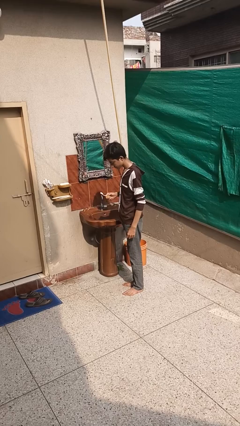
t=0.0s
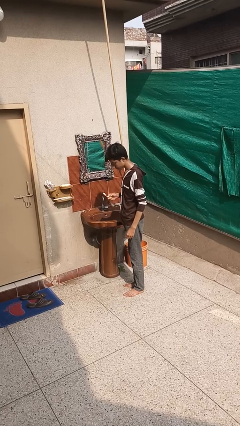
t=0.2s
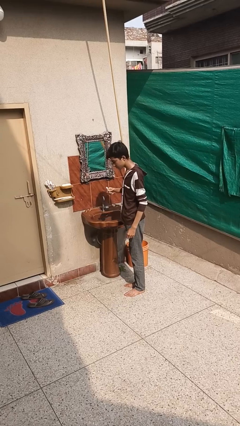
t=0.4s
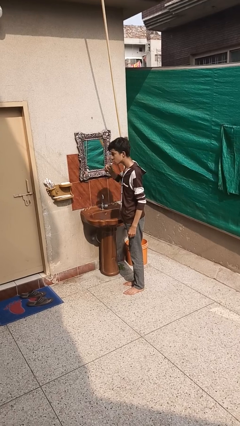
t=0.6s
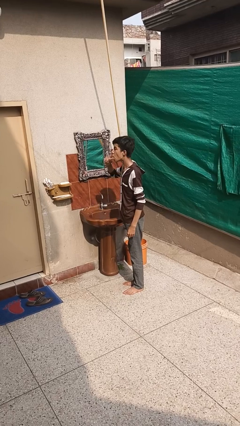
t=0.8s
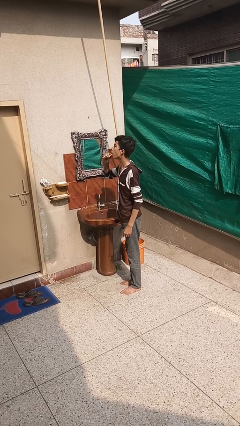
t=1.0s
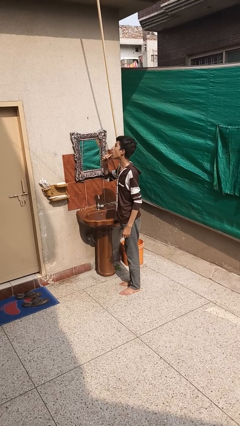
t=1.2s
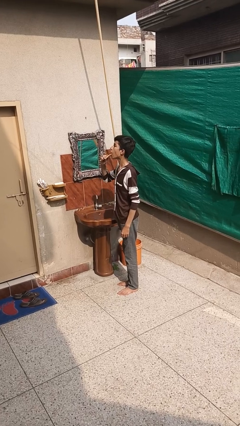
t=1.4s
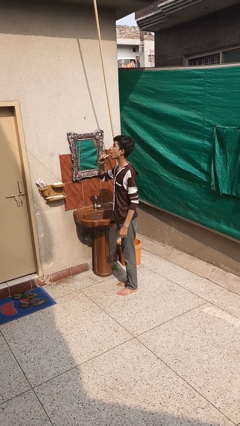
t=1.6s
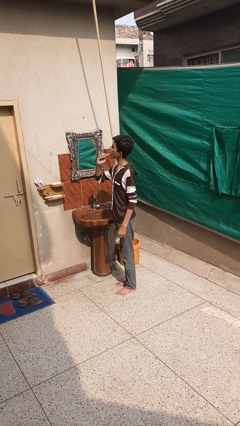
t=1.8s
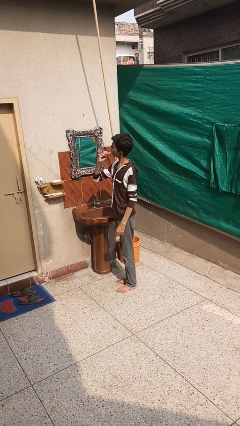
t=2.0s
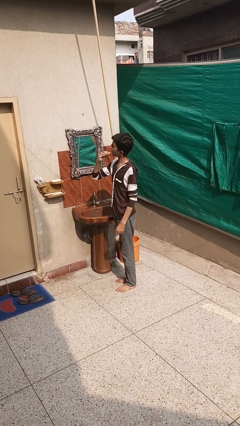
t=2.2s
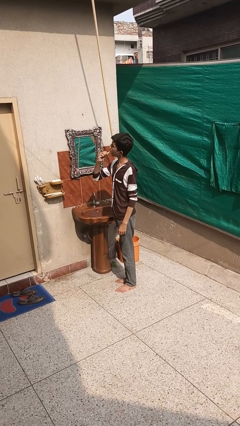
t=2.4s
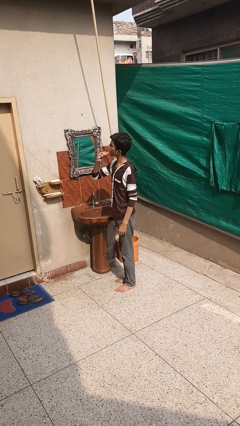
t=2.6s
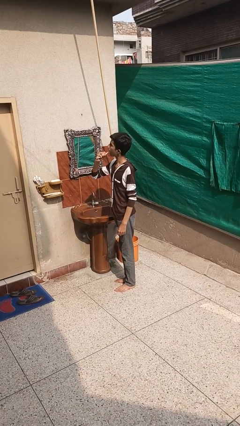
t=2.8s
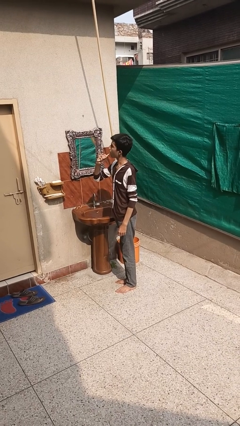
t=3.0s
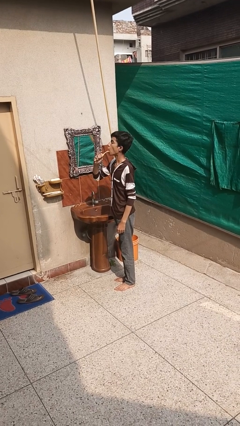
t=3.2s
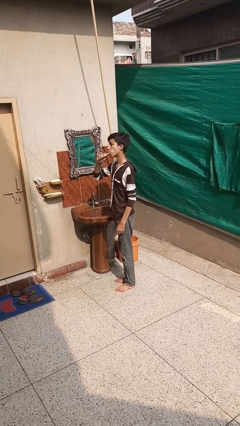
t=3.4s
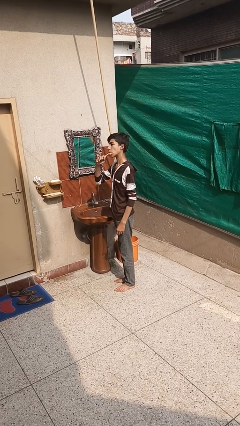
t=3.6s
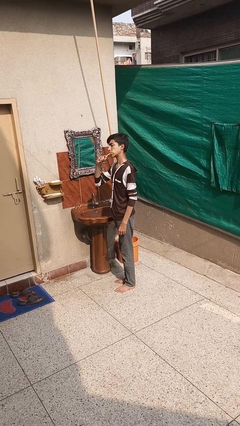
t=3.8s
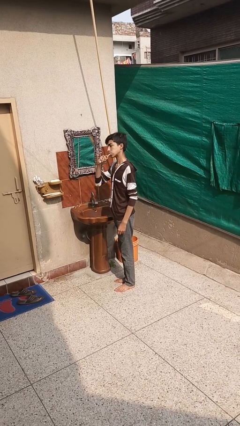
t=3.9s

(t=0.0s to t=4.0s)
person brushes teeth

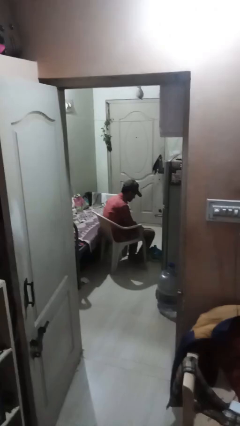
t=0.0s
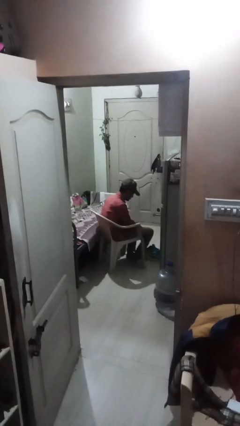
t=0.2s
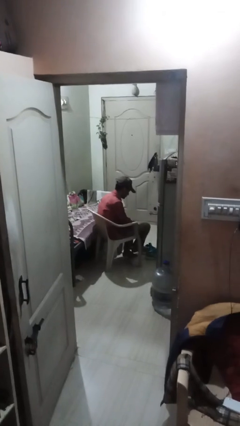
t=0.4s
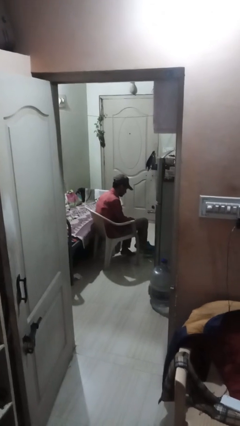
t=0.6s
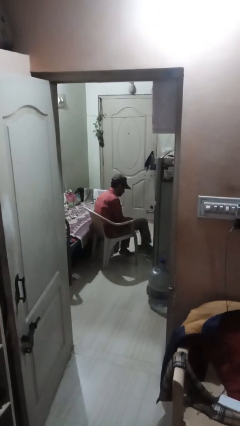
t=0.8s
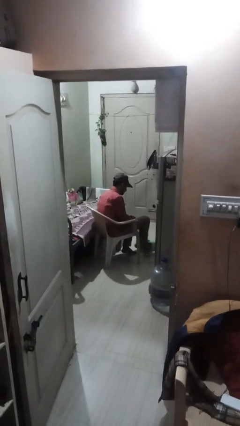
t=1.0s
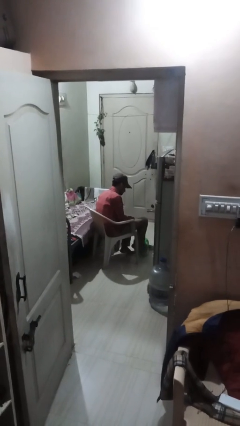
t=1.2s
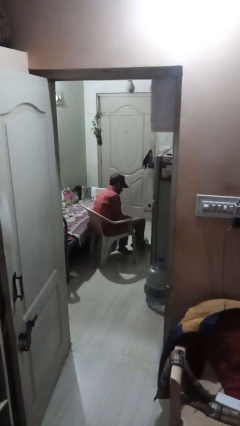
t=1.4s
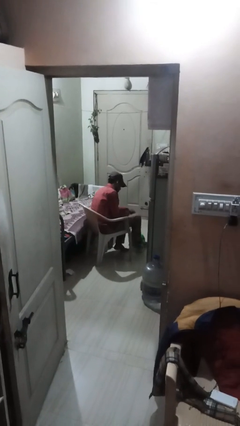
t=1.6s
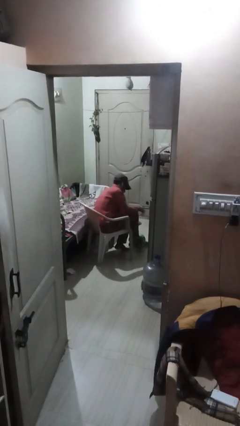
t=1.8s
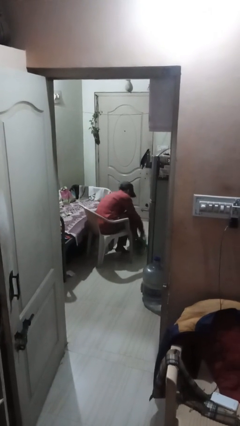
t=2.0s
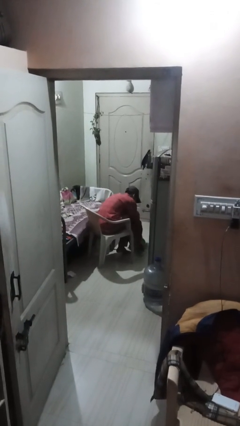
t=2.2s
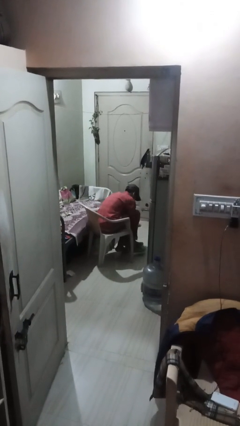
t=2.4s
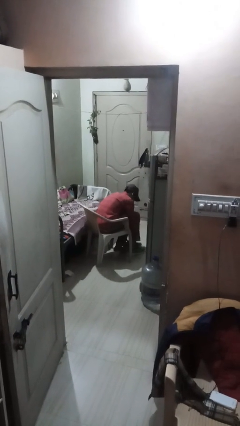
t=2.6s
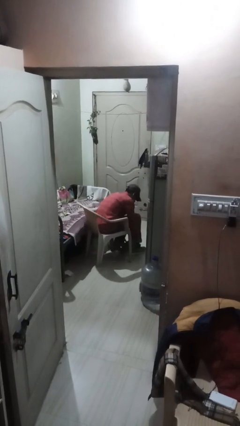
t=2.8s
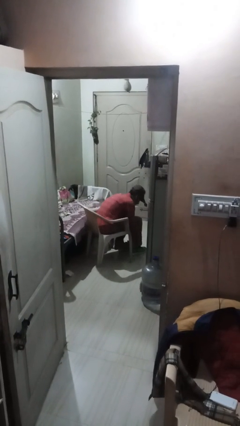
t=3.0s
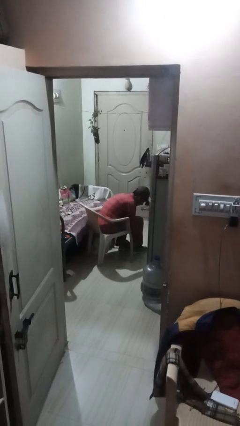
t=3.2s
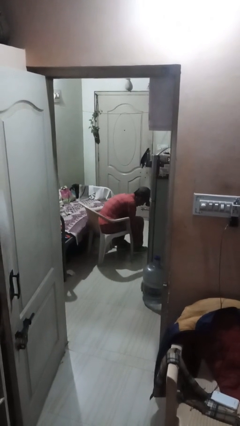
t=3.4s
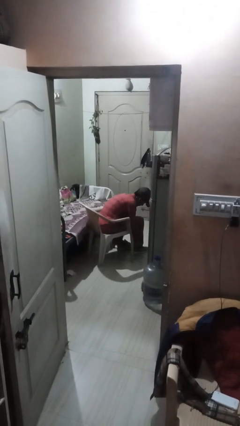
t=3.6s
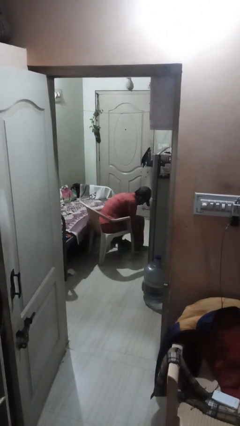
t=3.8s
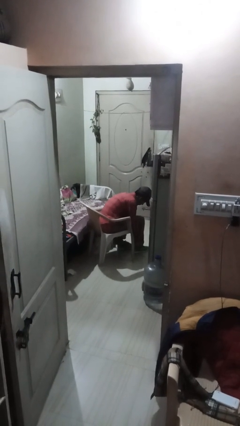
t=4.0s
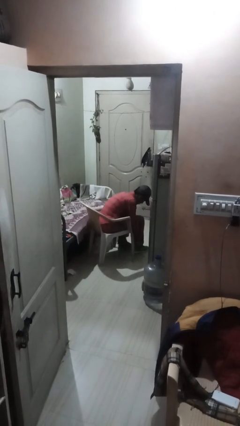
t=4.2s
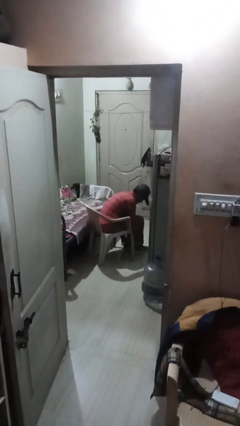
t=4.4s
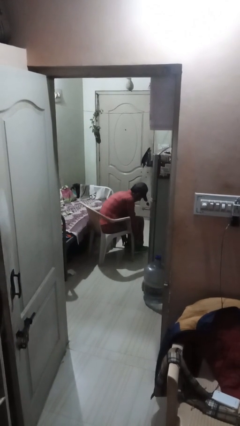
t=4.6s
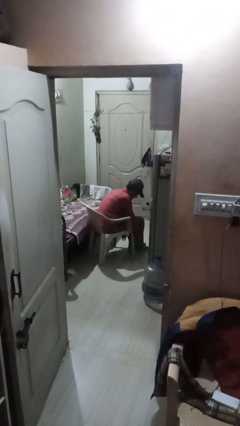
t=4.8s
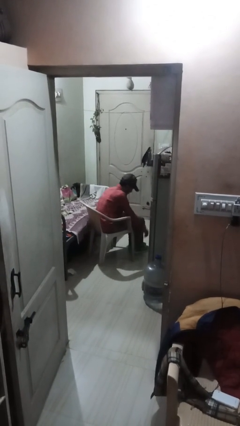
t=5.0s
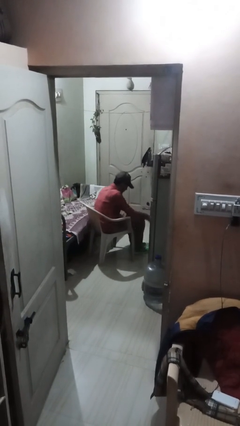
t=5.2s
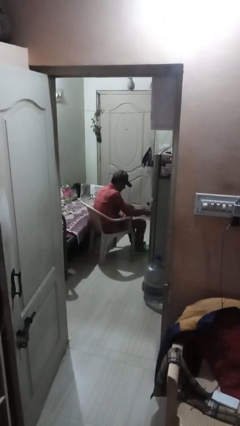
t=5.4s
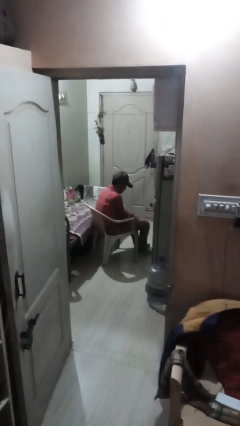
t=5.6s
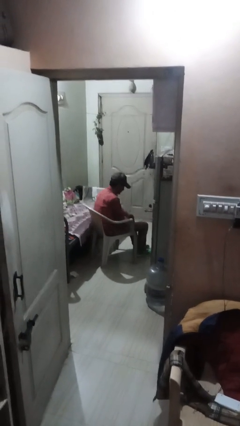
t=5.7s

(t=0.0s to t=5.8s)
person puts on shoes

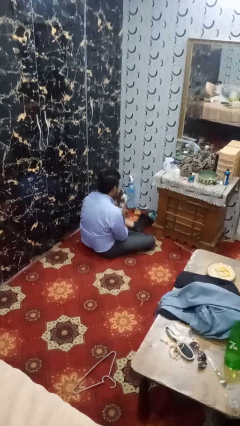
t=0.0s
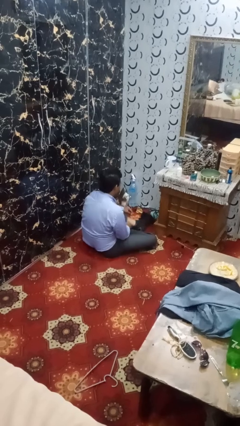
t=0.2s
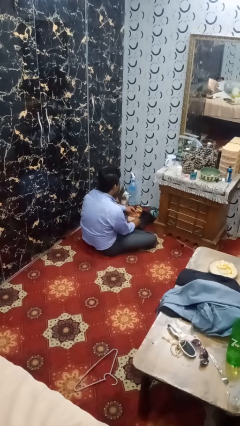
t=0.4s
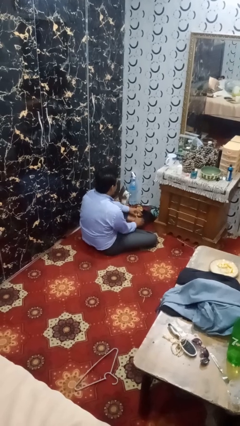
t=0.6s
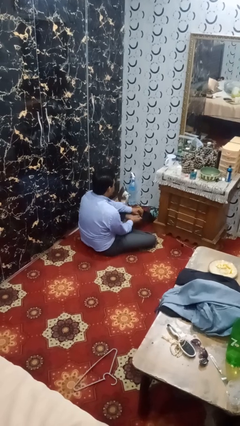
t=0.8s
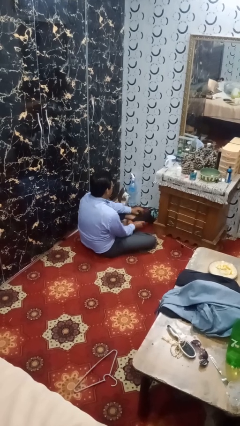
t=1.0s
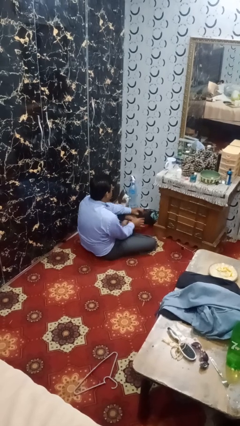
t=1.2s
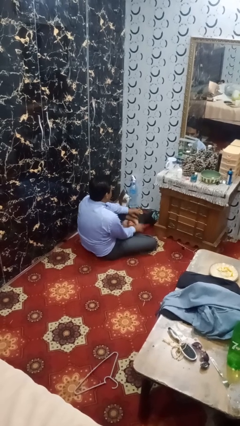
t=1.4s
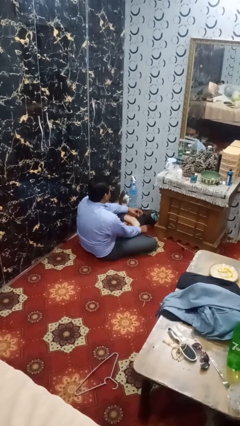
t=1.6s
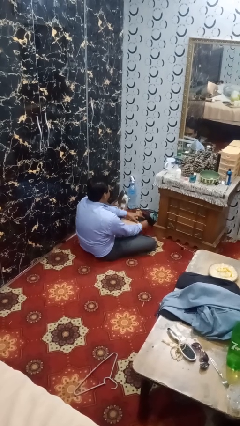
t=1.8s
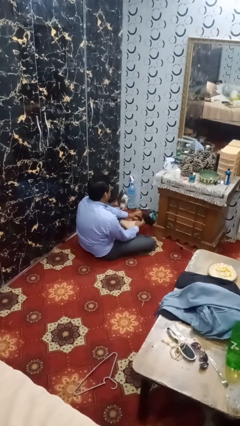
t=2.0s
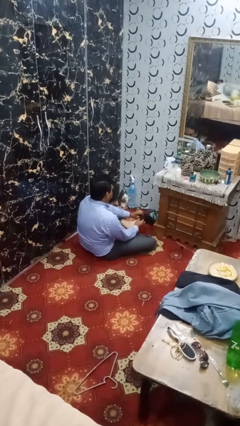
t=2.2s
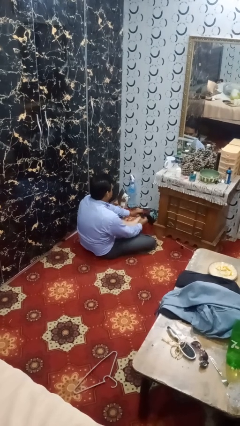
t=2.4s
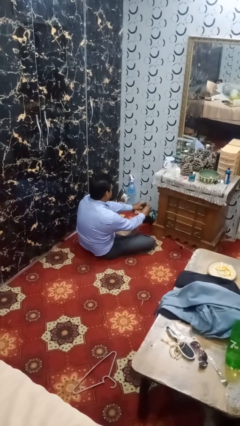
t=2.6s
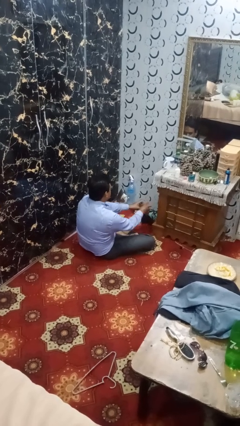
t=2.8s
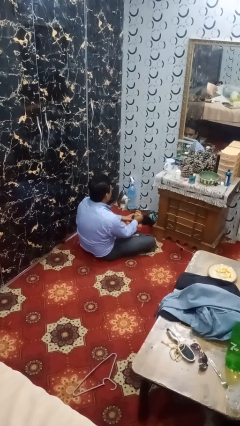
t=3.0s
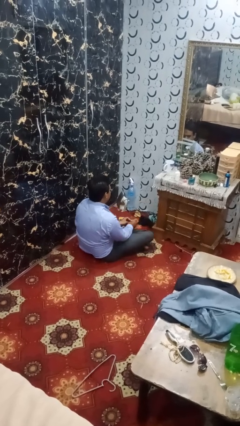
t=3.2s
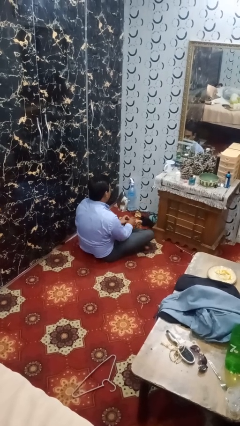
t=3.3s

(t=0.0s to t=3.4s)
person takes off socks

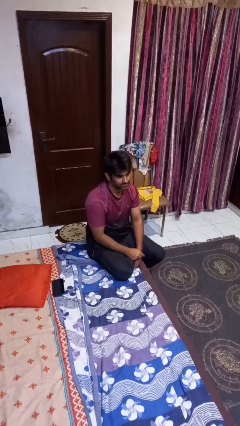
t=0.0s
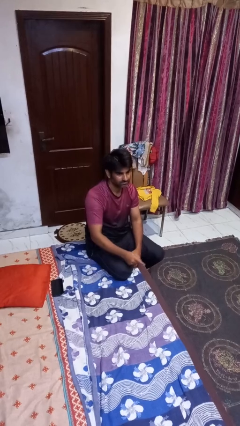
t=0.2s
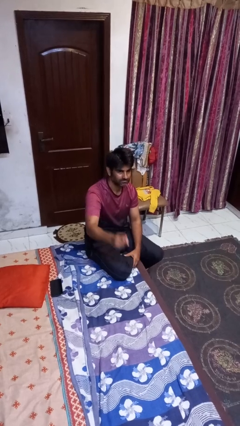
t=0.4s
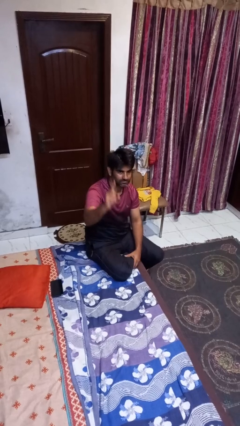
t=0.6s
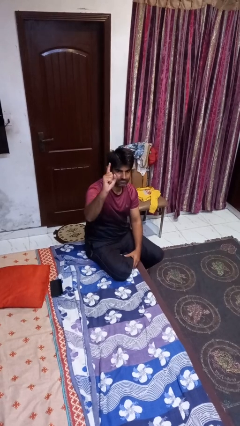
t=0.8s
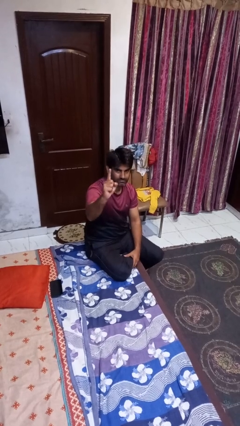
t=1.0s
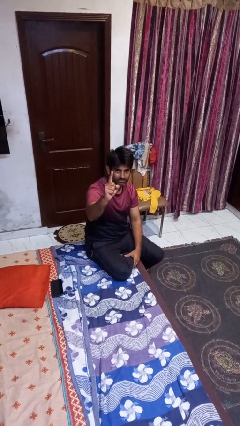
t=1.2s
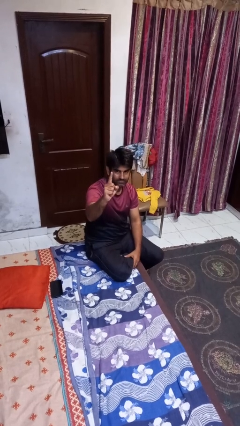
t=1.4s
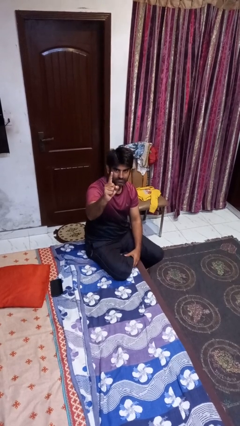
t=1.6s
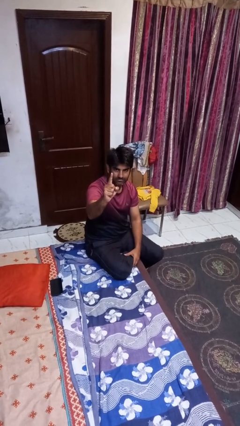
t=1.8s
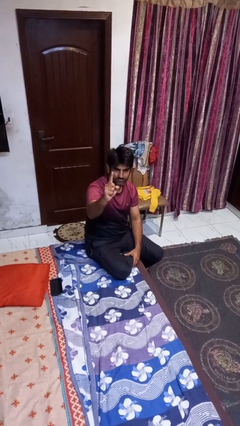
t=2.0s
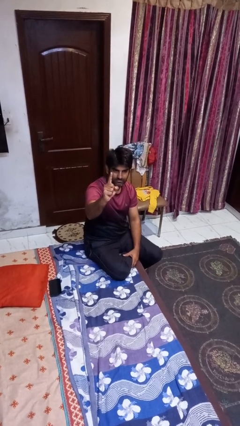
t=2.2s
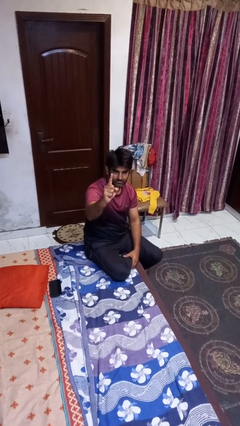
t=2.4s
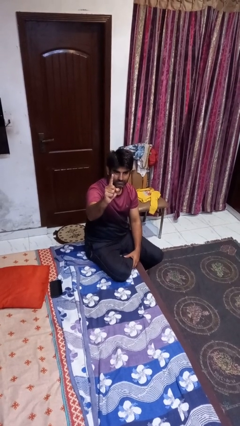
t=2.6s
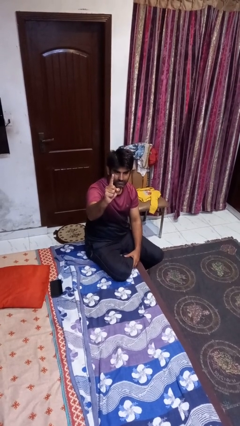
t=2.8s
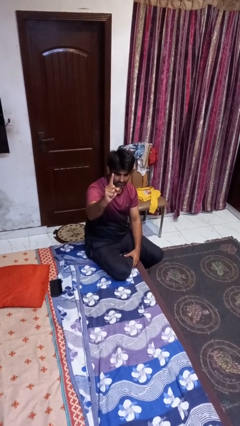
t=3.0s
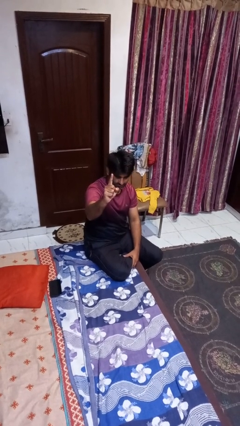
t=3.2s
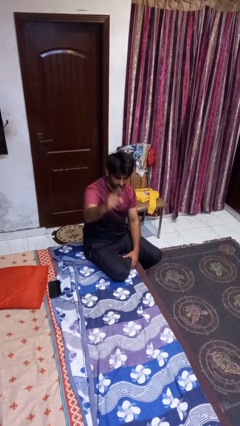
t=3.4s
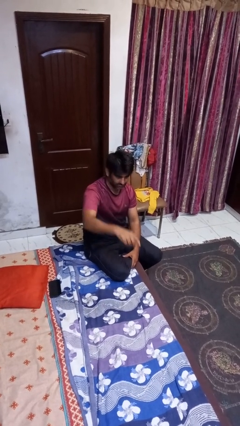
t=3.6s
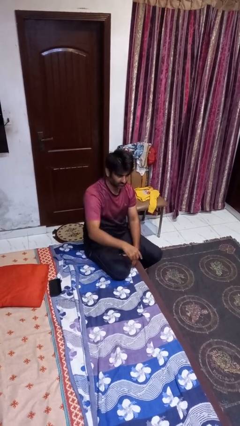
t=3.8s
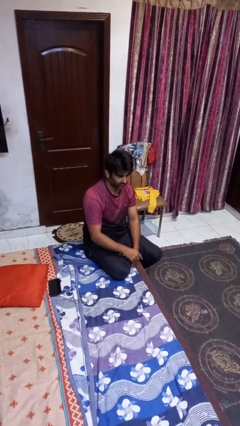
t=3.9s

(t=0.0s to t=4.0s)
person gestures number one

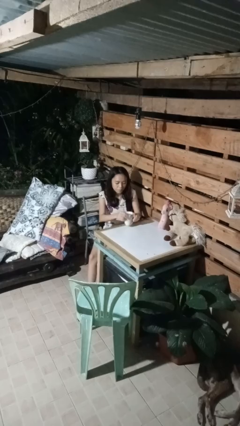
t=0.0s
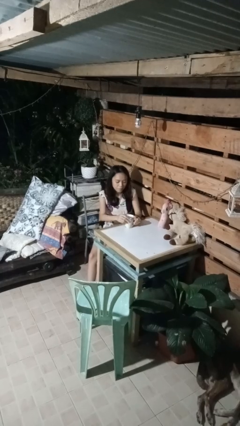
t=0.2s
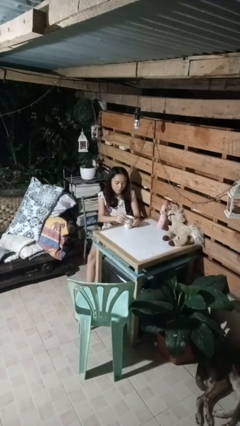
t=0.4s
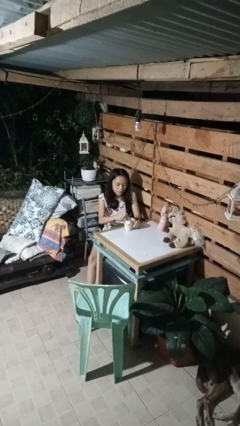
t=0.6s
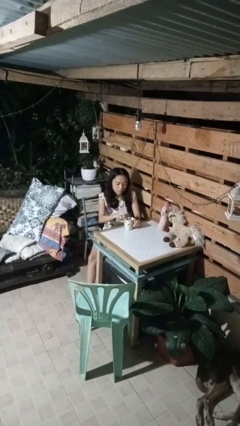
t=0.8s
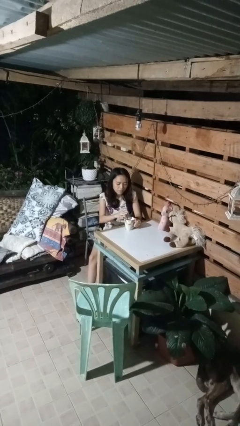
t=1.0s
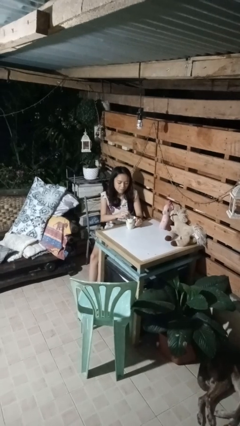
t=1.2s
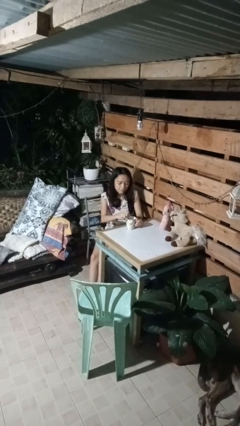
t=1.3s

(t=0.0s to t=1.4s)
person stirs mug
